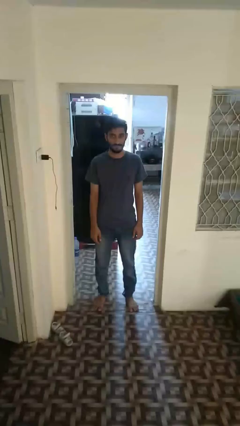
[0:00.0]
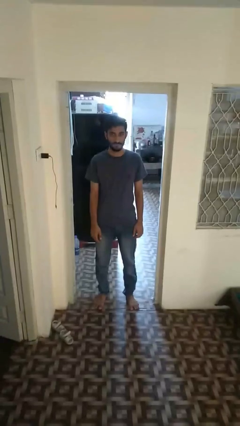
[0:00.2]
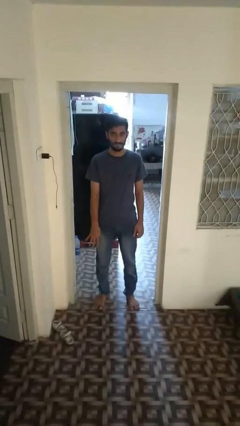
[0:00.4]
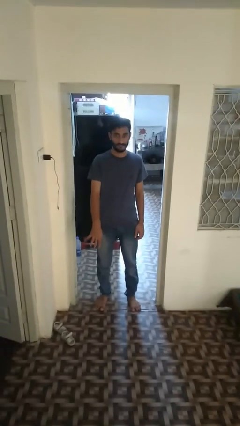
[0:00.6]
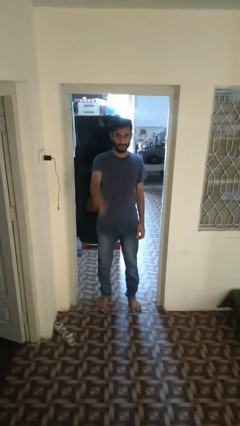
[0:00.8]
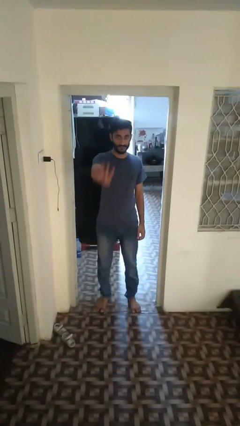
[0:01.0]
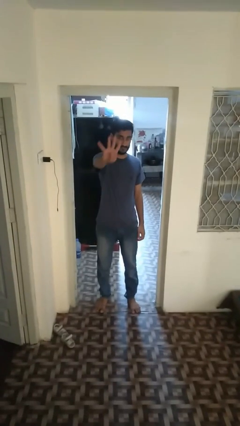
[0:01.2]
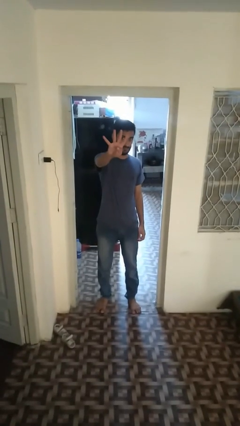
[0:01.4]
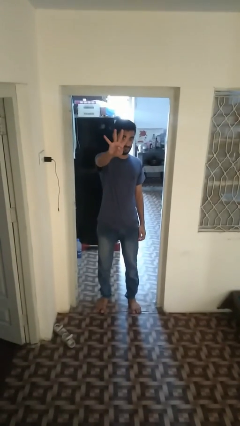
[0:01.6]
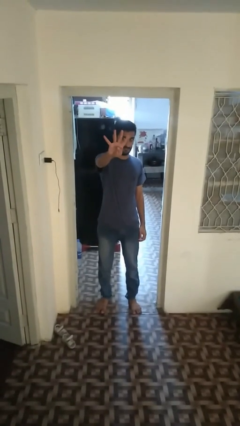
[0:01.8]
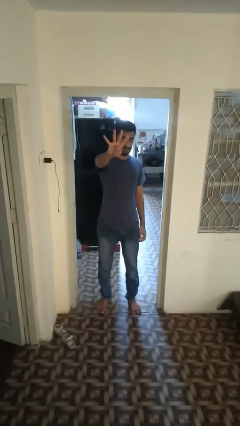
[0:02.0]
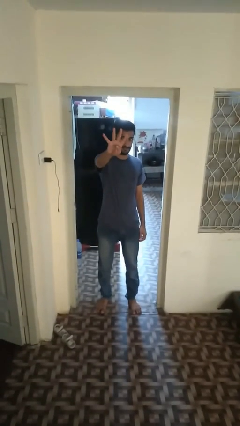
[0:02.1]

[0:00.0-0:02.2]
person gestures number four

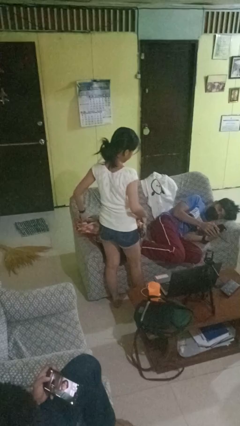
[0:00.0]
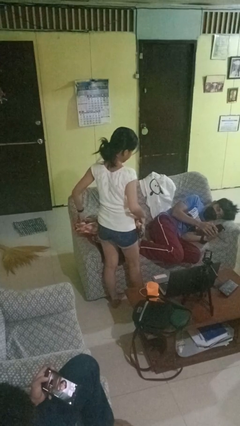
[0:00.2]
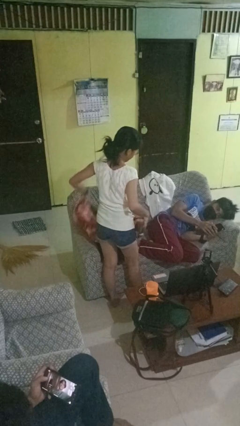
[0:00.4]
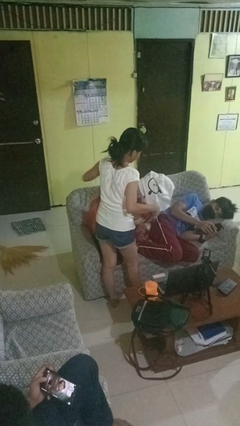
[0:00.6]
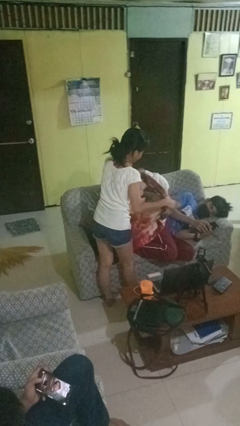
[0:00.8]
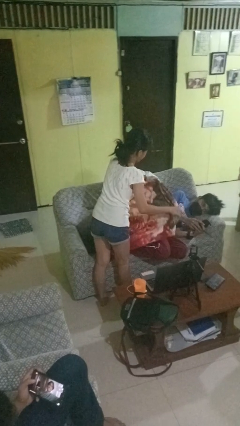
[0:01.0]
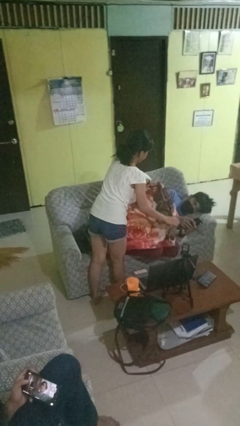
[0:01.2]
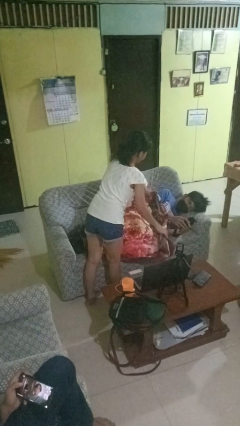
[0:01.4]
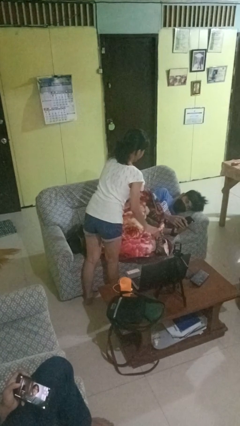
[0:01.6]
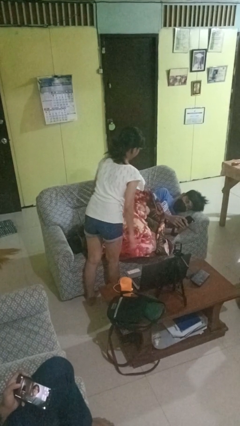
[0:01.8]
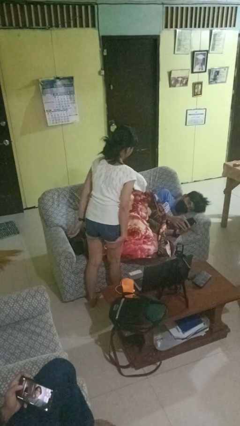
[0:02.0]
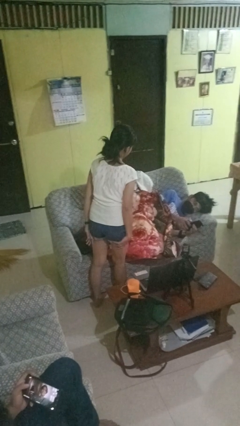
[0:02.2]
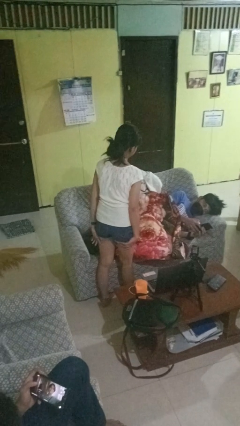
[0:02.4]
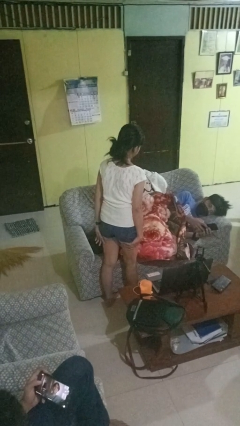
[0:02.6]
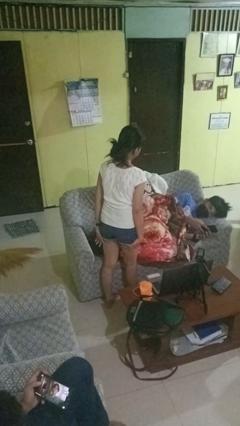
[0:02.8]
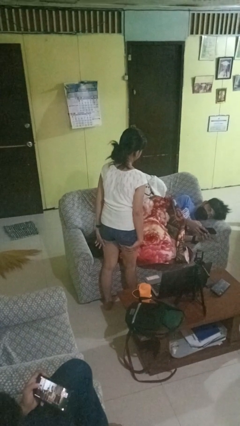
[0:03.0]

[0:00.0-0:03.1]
person covers friend with blanket

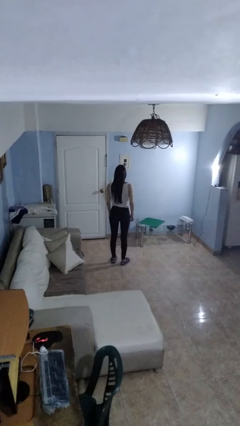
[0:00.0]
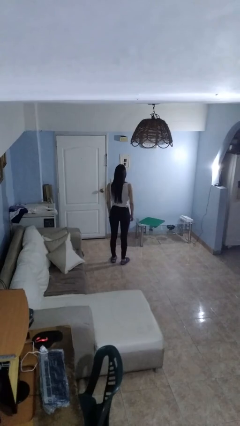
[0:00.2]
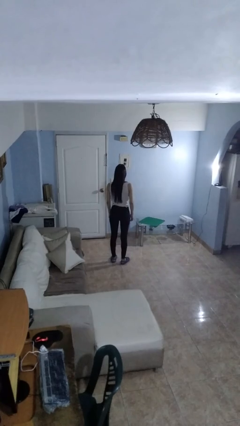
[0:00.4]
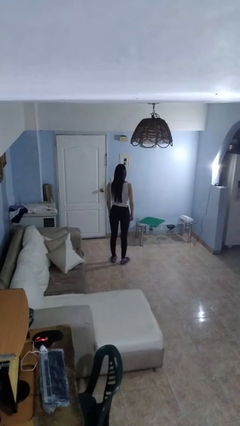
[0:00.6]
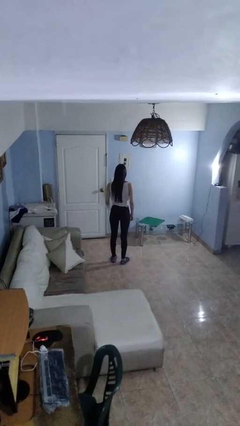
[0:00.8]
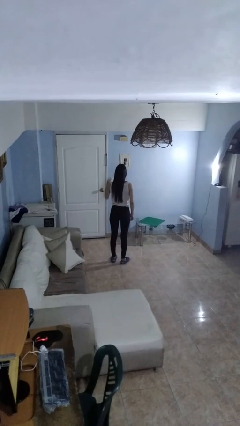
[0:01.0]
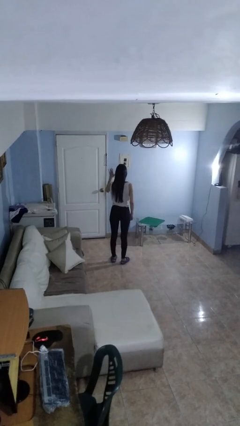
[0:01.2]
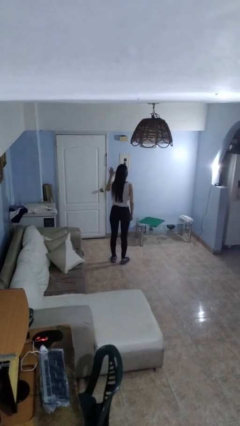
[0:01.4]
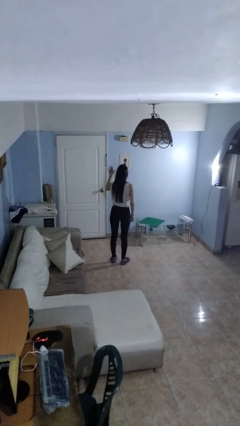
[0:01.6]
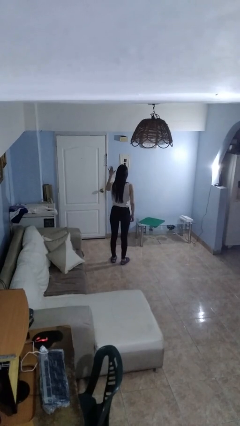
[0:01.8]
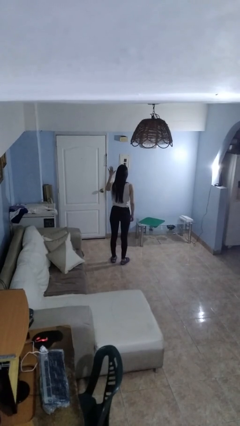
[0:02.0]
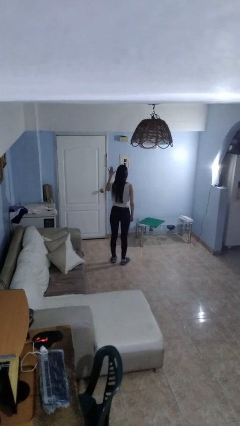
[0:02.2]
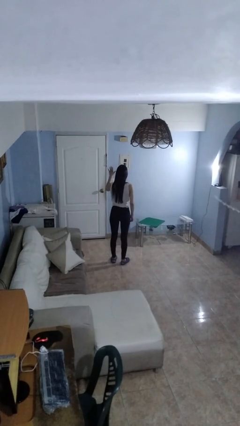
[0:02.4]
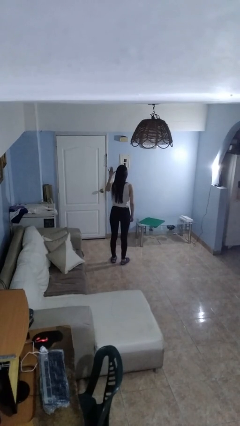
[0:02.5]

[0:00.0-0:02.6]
person gestures number five

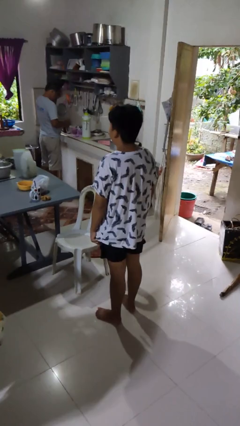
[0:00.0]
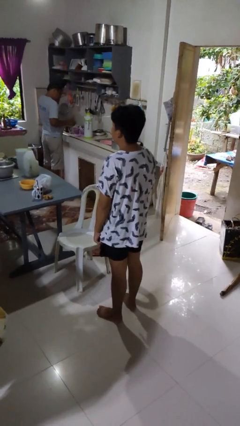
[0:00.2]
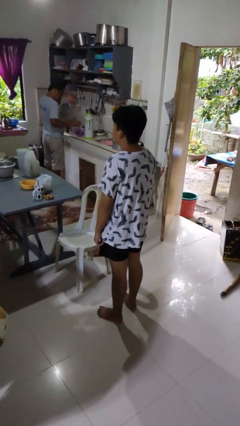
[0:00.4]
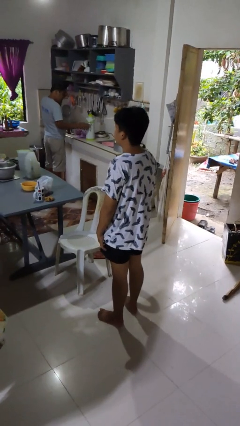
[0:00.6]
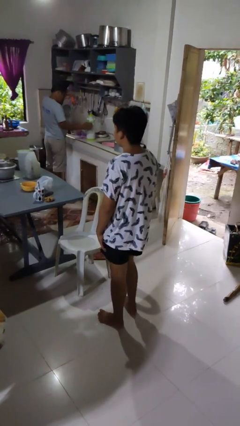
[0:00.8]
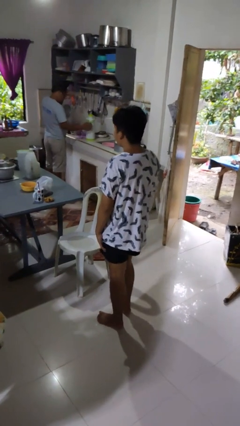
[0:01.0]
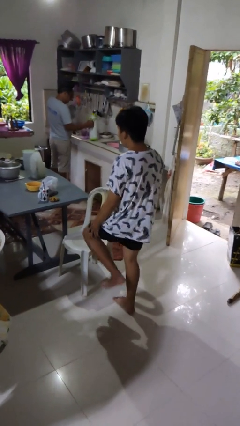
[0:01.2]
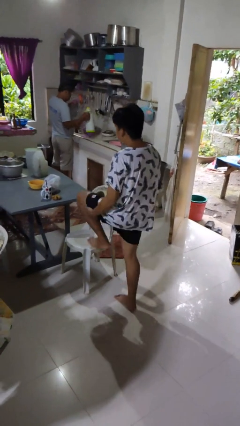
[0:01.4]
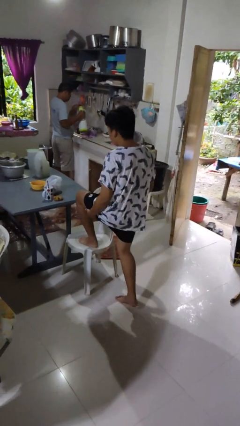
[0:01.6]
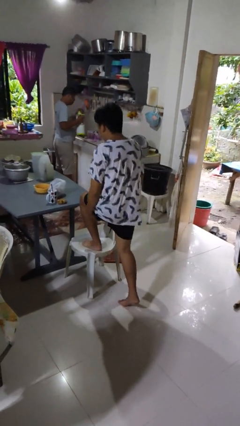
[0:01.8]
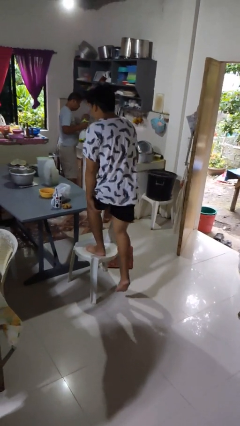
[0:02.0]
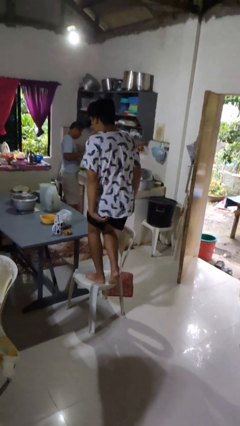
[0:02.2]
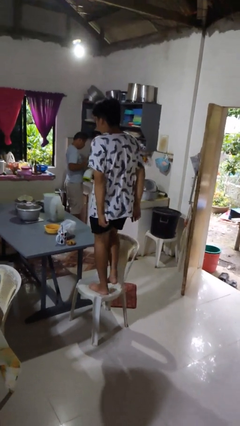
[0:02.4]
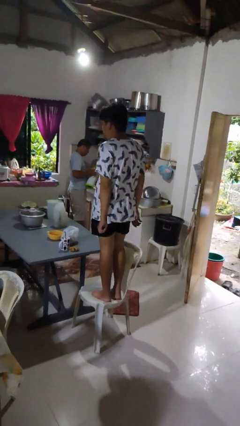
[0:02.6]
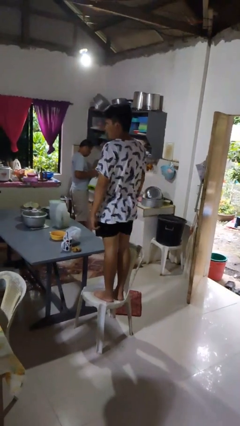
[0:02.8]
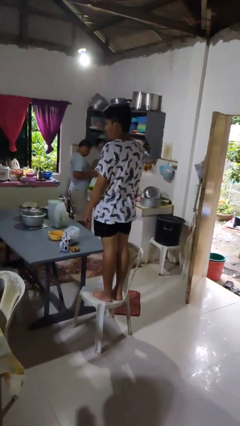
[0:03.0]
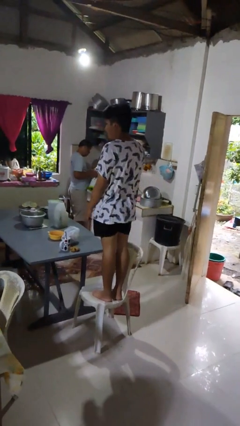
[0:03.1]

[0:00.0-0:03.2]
person climbs on chair

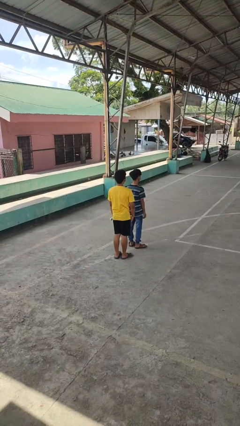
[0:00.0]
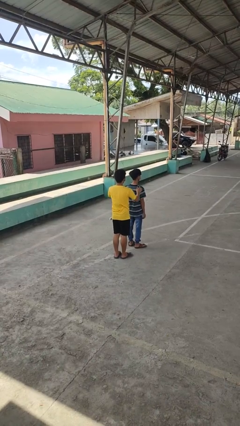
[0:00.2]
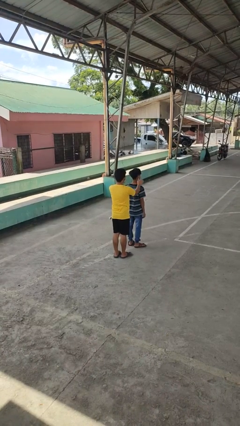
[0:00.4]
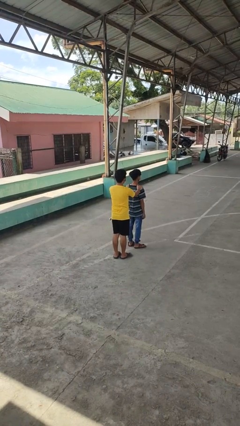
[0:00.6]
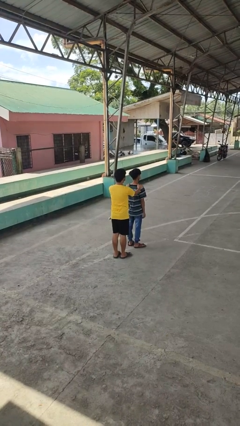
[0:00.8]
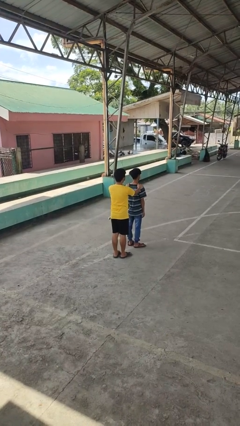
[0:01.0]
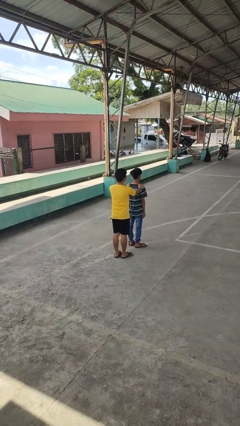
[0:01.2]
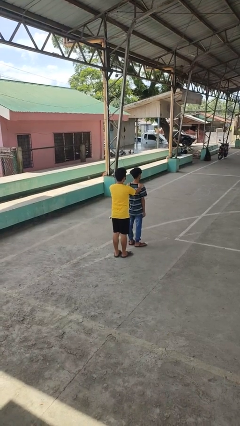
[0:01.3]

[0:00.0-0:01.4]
person grabs person by shoulder

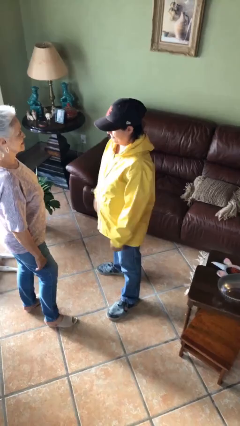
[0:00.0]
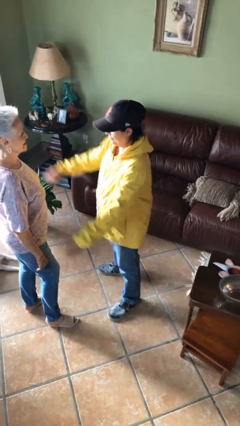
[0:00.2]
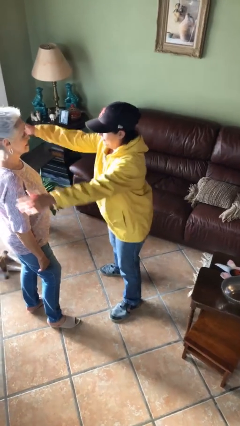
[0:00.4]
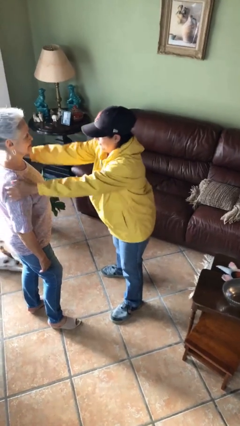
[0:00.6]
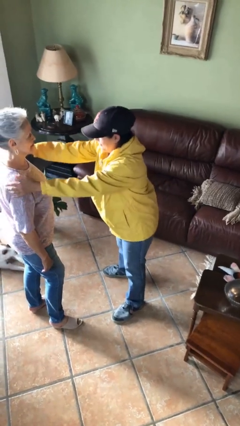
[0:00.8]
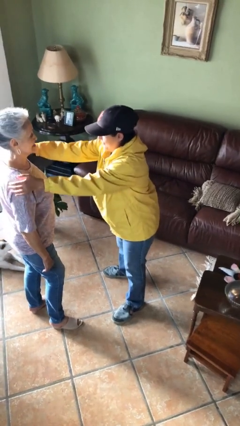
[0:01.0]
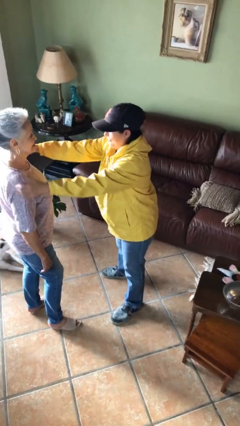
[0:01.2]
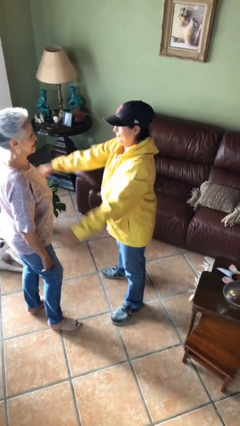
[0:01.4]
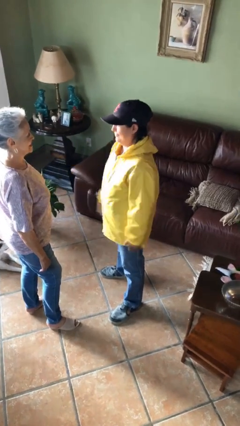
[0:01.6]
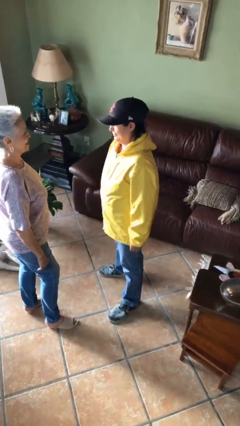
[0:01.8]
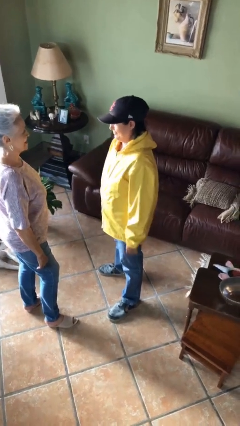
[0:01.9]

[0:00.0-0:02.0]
person pounds shoulders of person

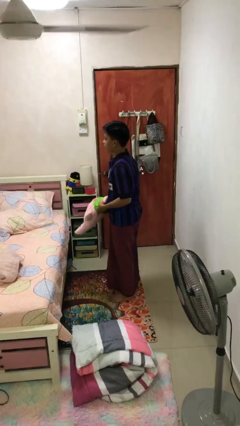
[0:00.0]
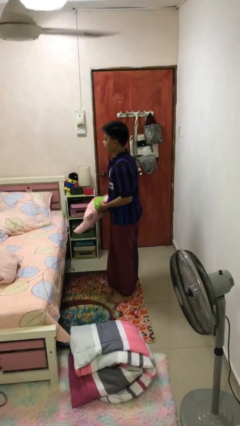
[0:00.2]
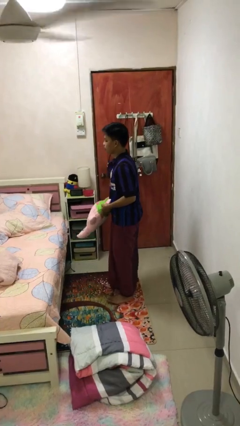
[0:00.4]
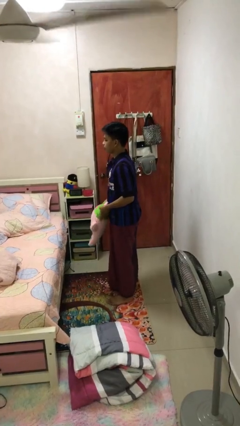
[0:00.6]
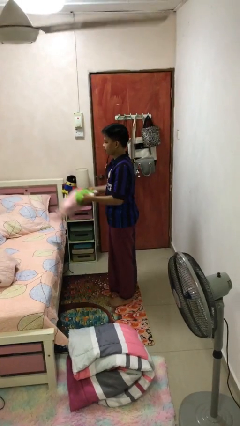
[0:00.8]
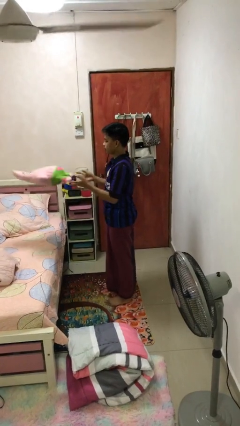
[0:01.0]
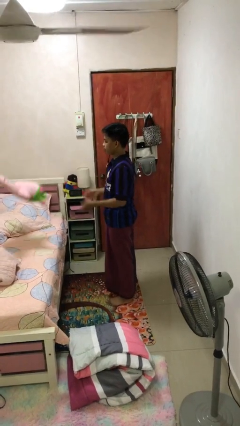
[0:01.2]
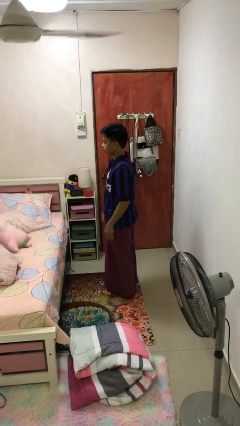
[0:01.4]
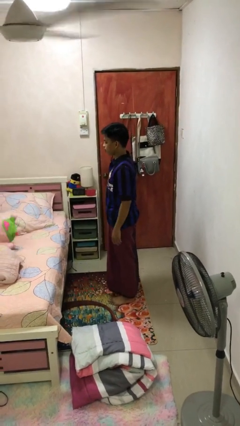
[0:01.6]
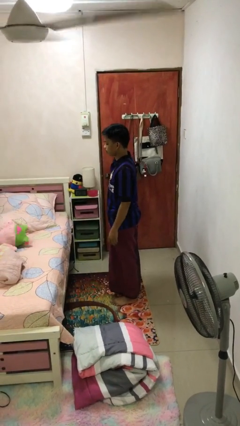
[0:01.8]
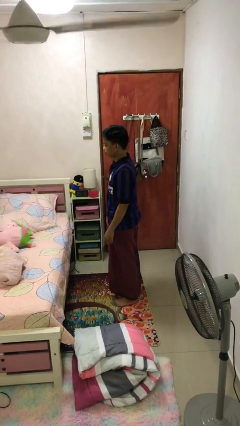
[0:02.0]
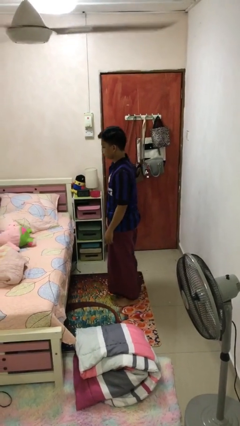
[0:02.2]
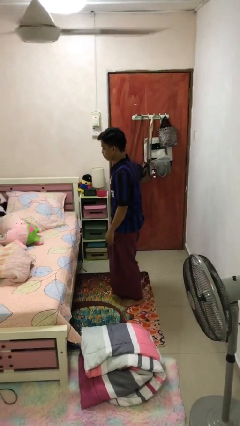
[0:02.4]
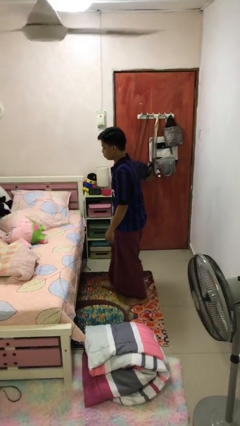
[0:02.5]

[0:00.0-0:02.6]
person throws object on bed
